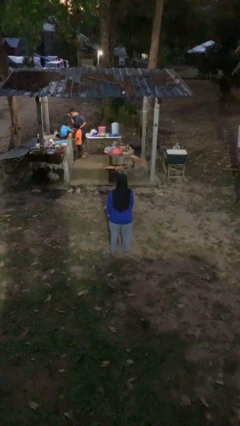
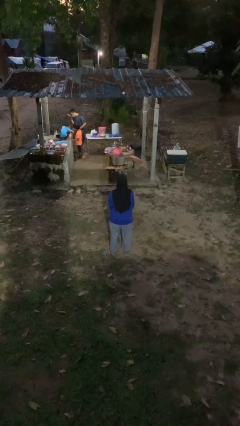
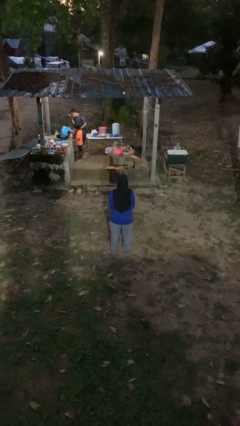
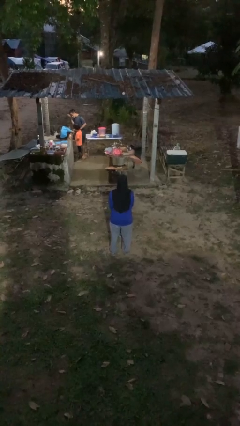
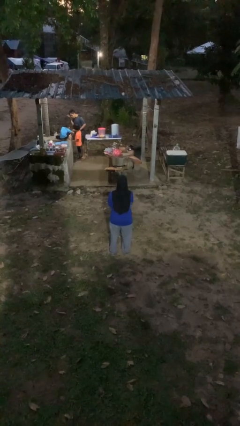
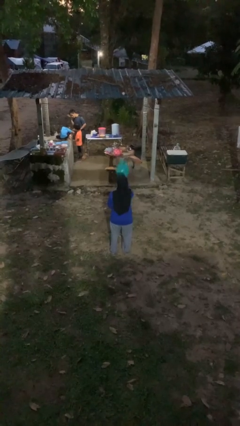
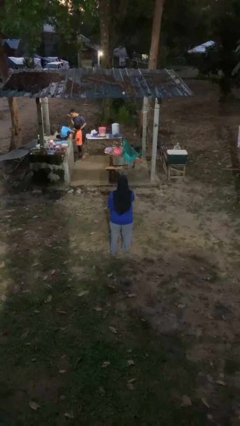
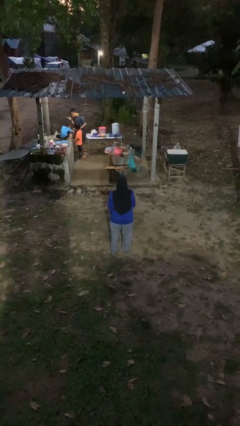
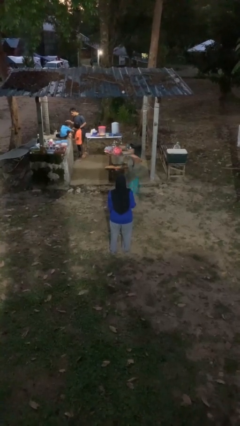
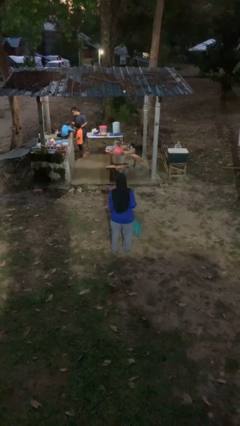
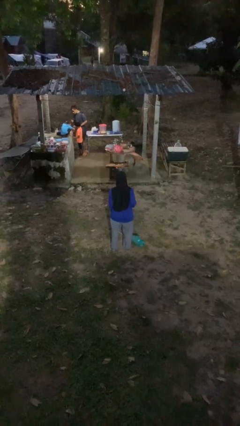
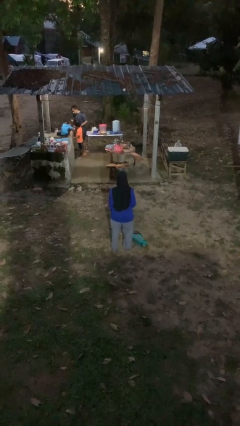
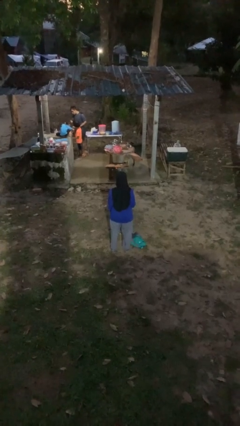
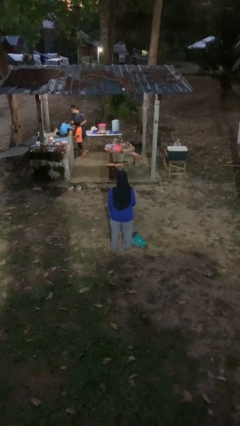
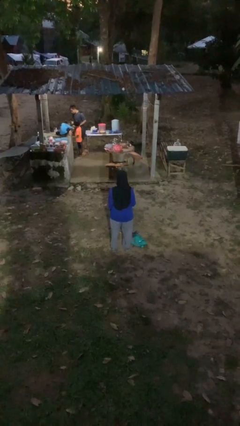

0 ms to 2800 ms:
person throws object into air

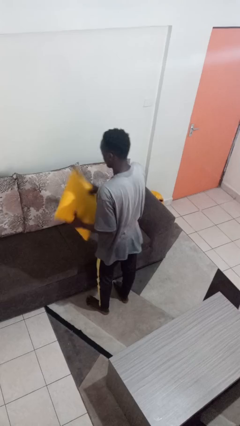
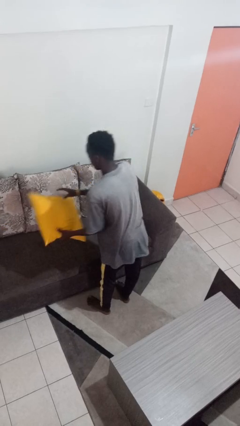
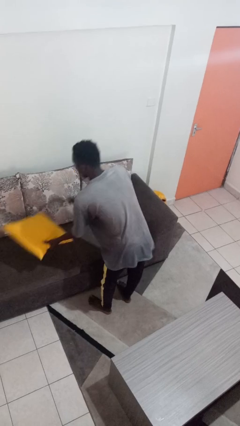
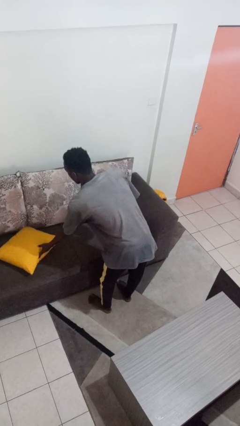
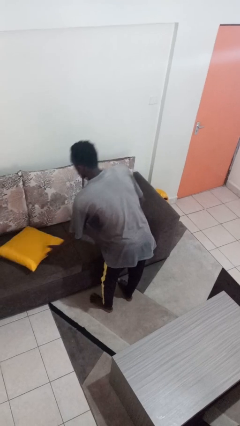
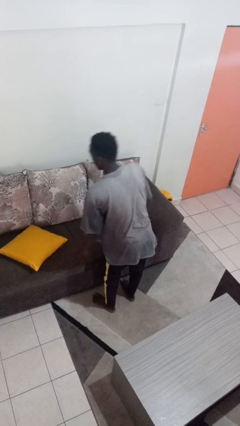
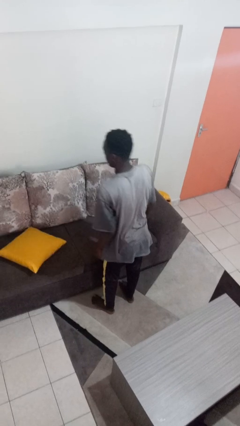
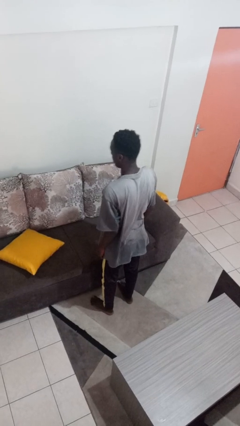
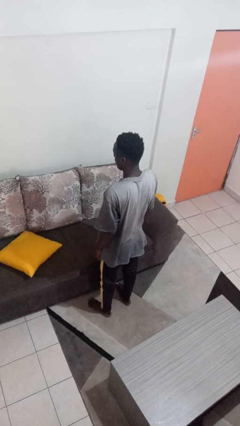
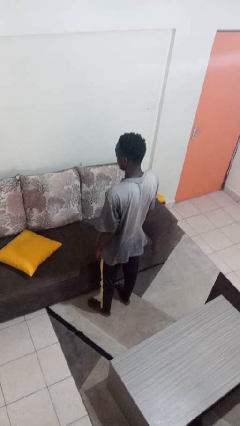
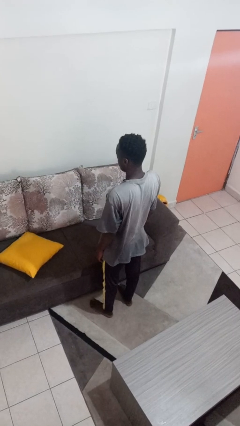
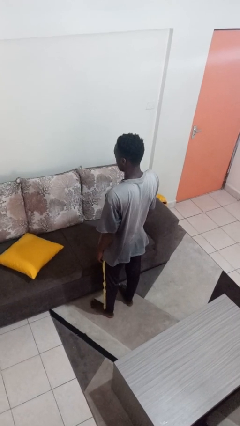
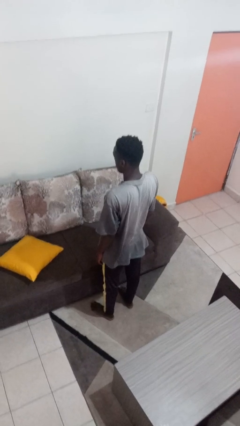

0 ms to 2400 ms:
person puts down object on couch

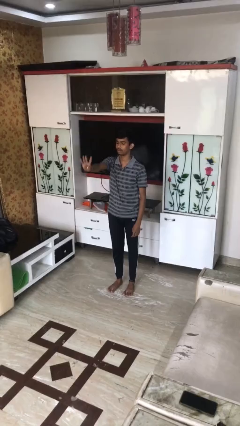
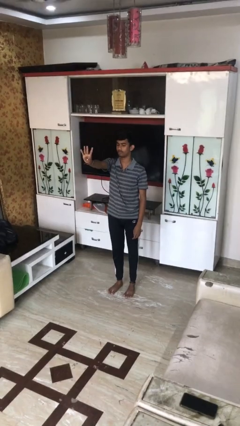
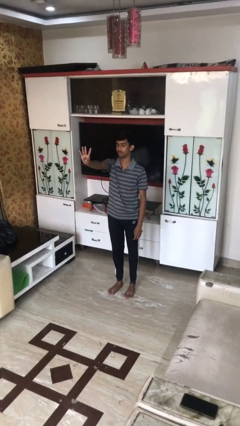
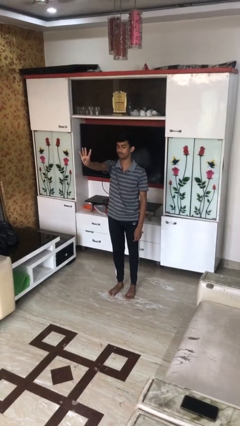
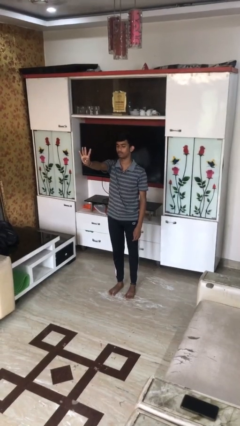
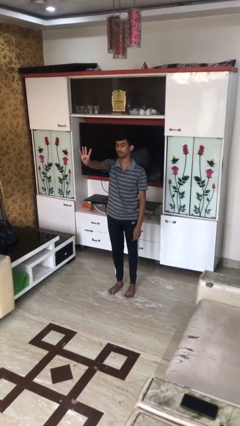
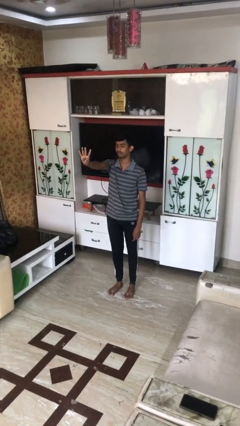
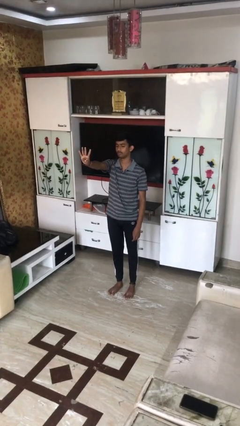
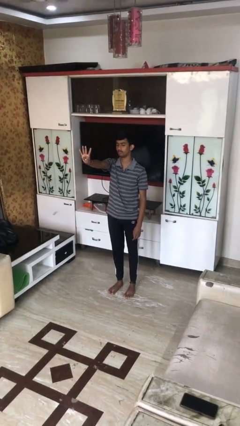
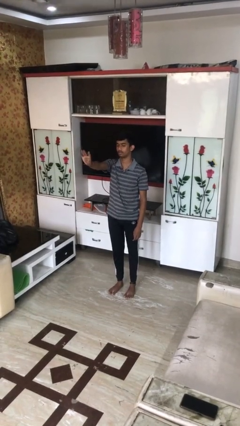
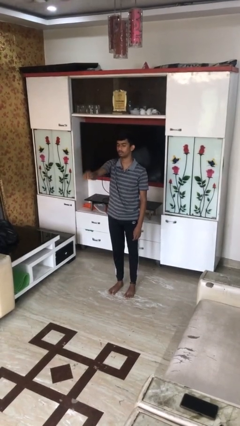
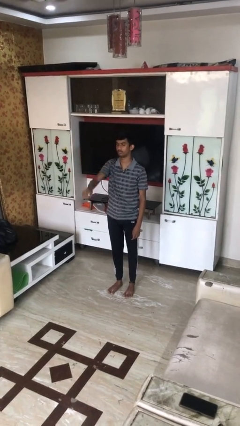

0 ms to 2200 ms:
person gestures number four

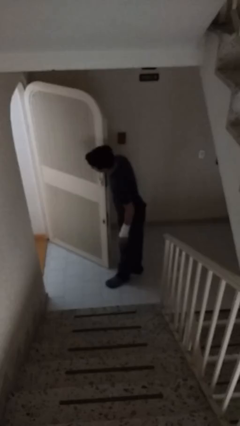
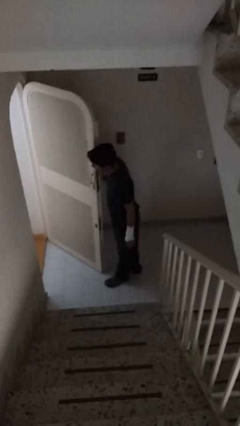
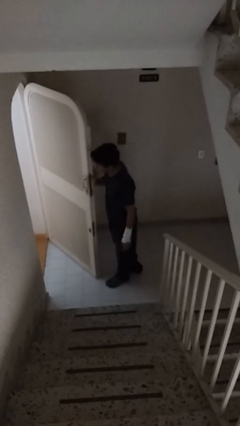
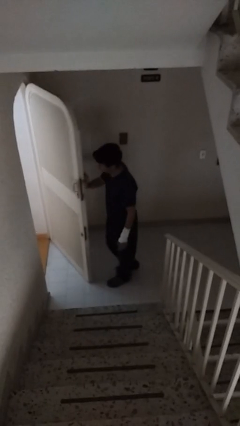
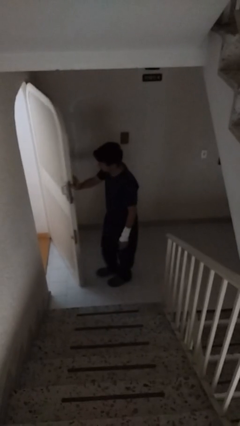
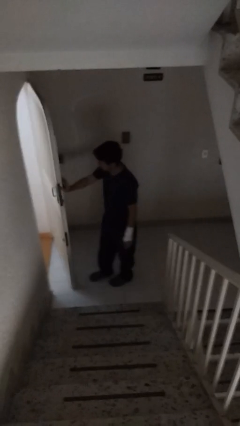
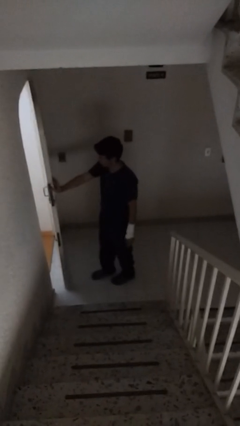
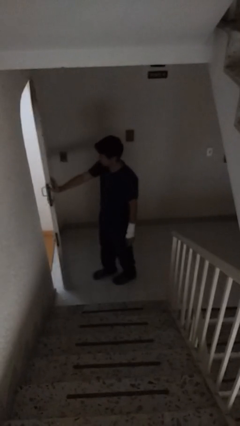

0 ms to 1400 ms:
person closes facility door

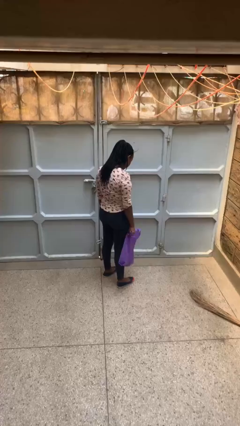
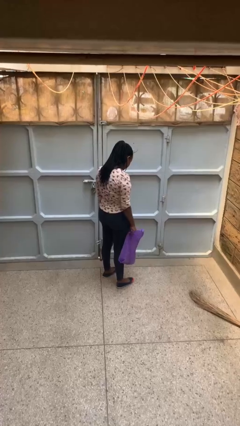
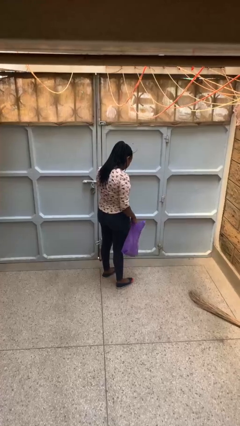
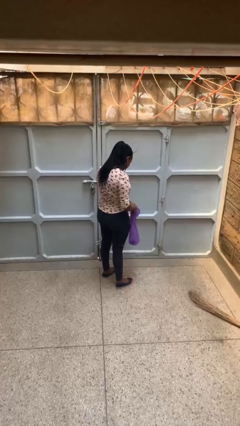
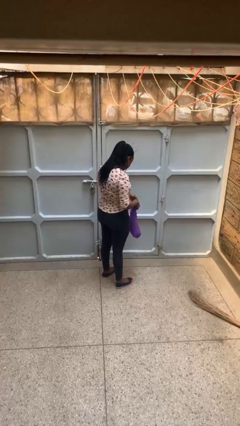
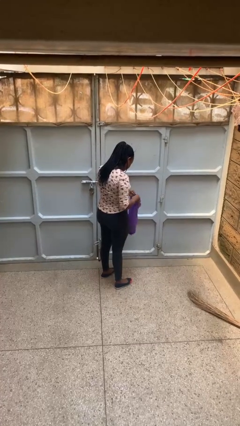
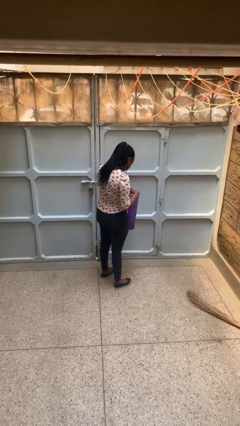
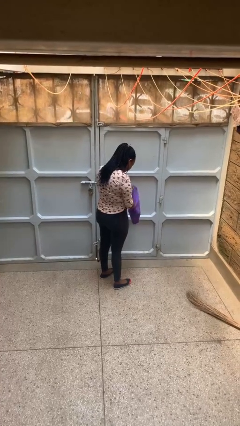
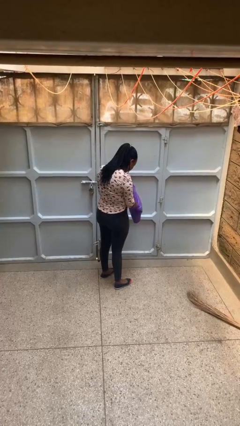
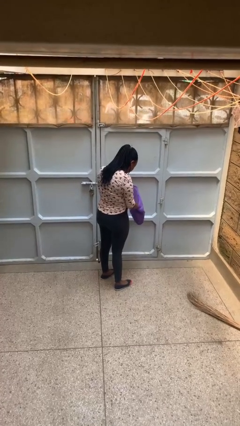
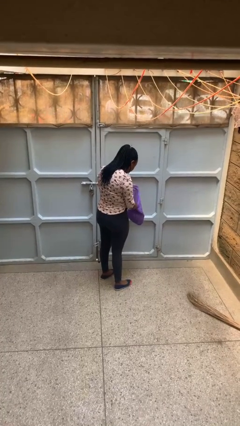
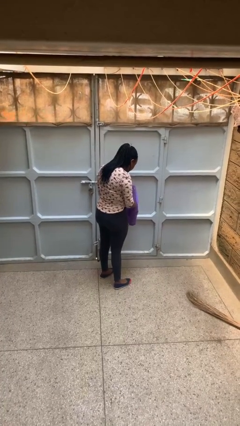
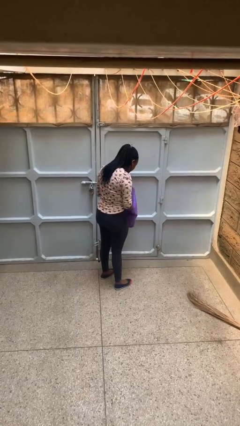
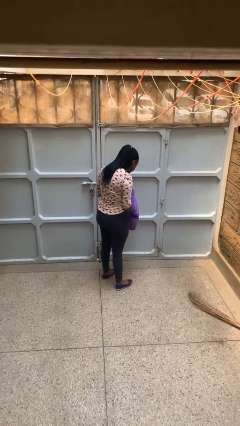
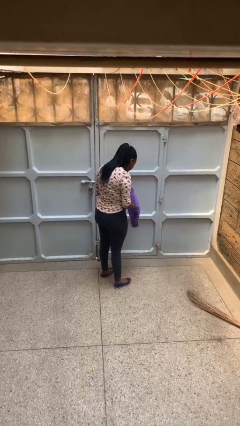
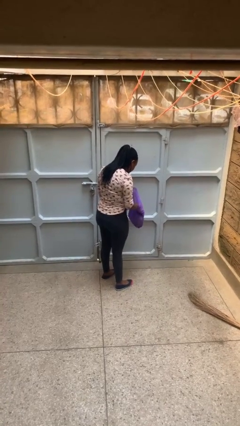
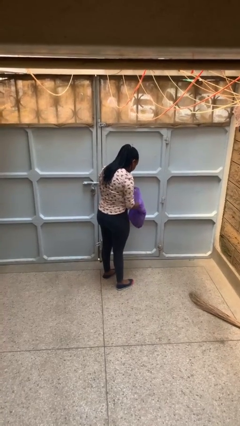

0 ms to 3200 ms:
person searches in bag

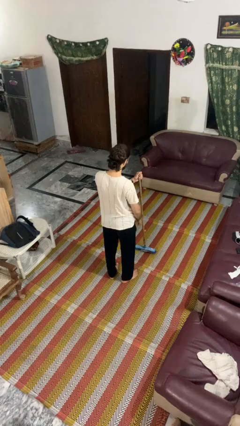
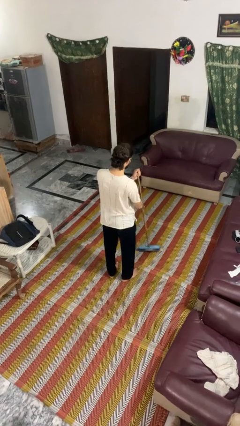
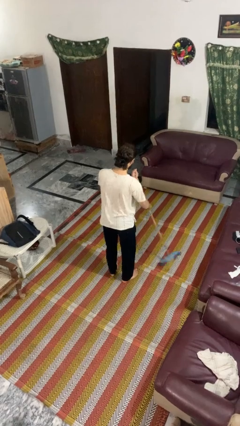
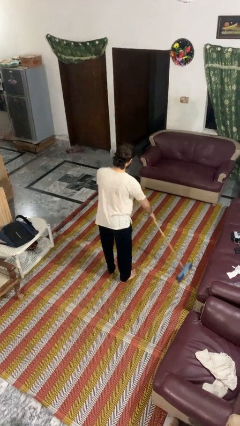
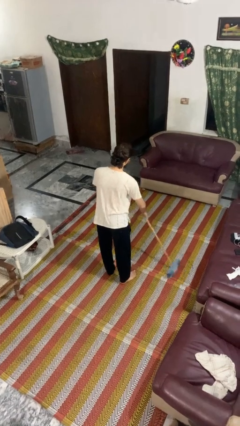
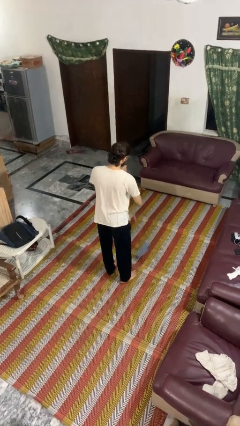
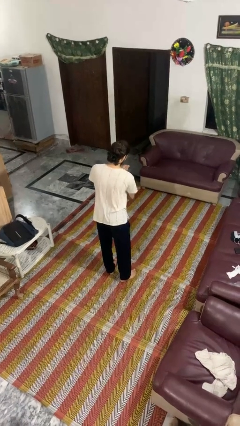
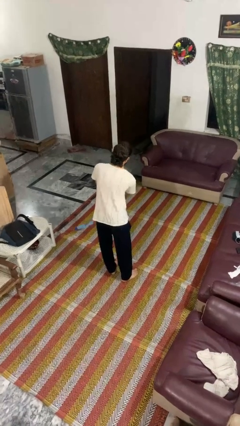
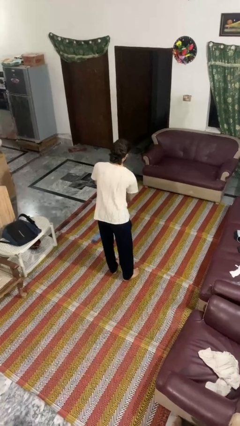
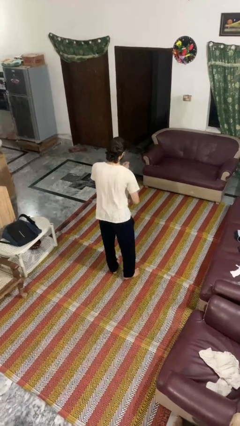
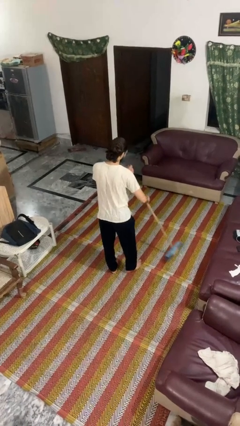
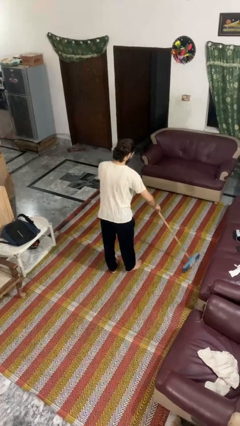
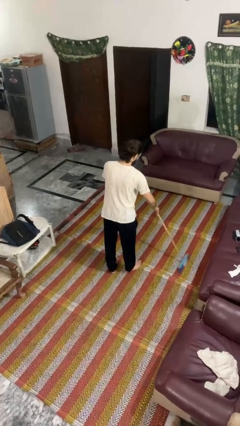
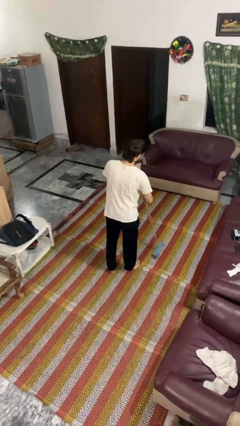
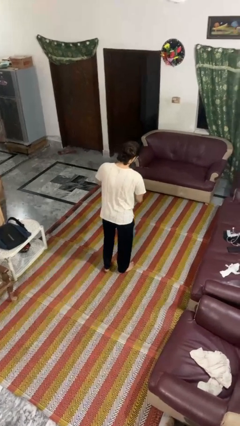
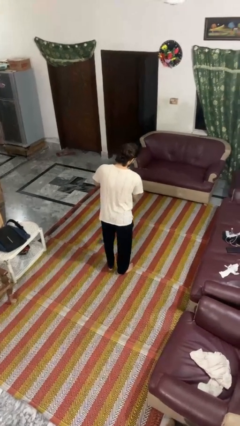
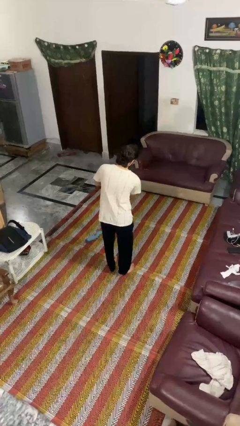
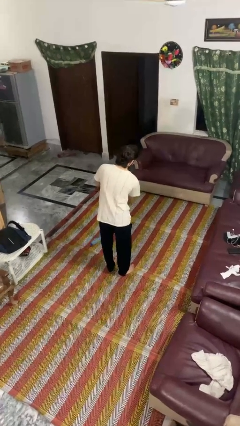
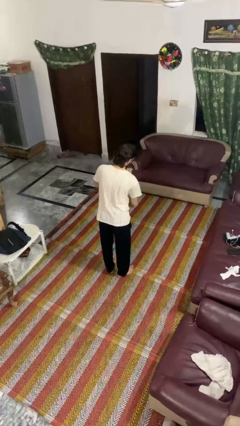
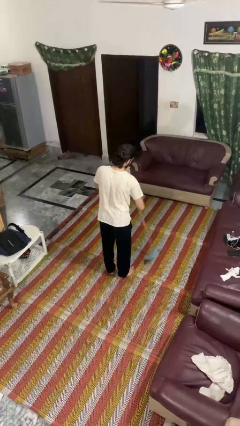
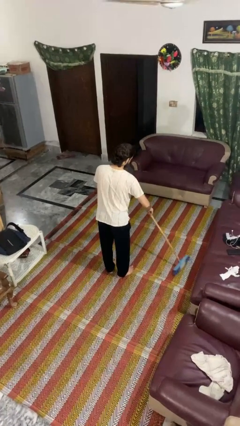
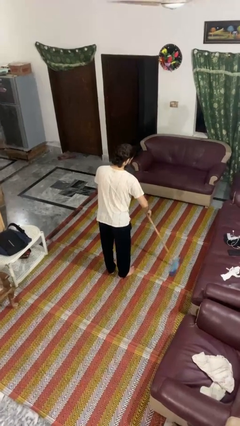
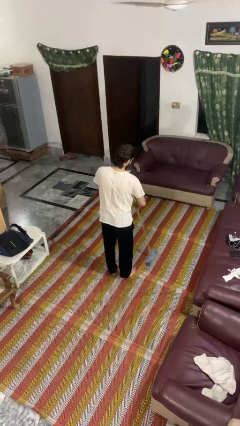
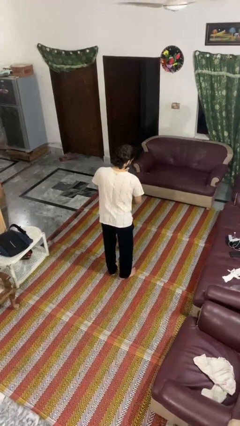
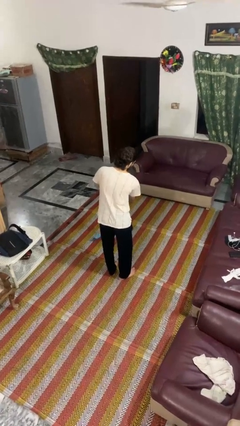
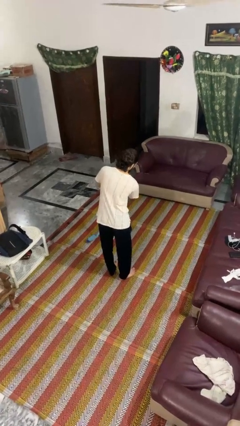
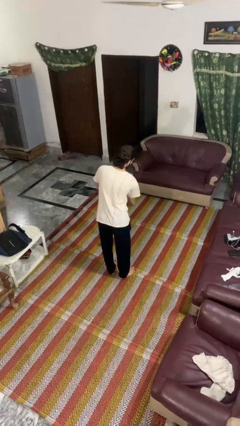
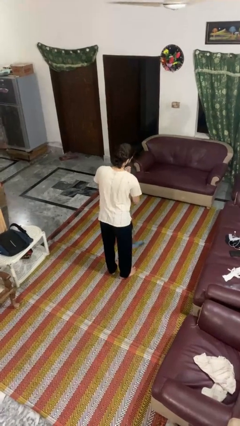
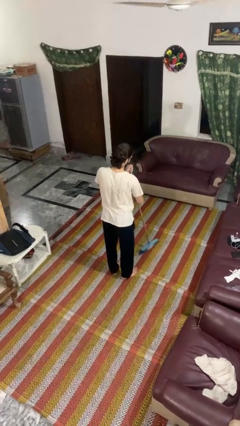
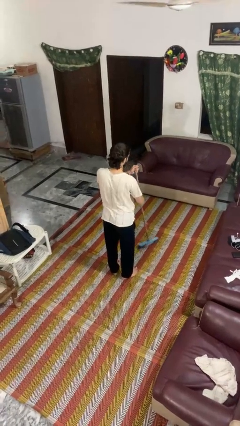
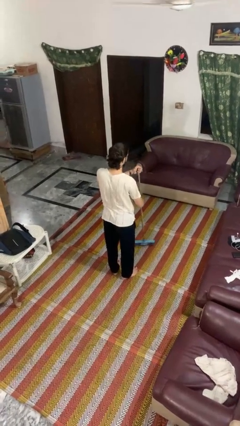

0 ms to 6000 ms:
person sweeps floor
